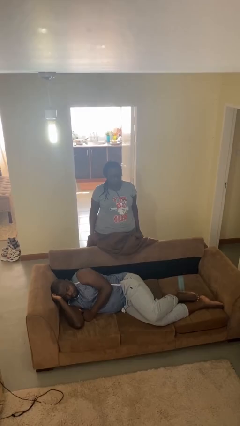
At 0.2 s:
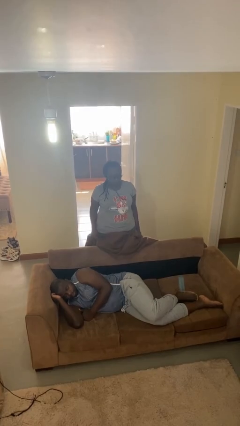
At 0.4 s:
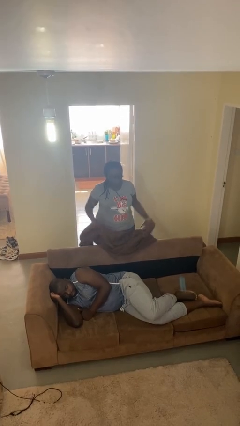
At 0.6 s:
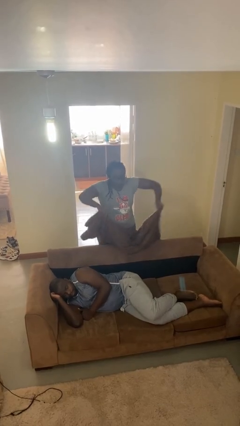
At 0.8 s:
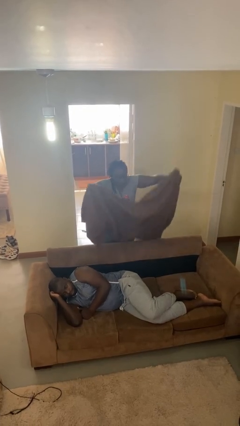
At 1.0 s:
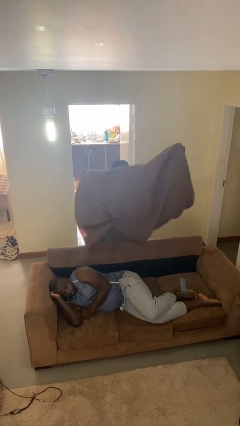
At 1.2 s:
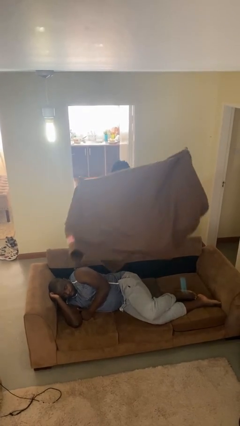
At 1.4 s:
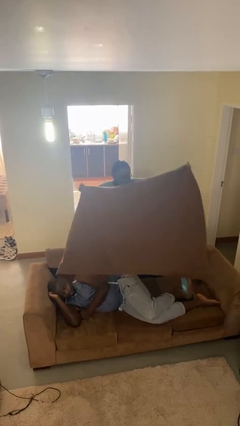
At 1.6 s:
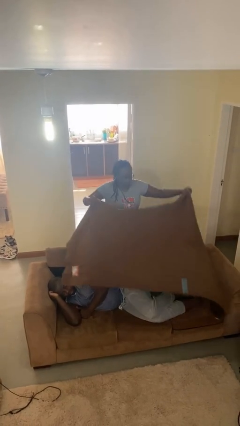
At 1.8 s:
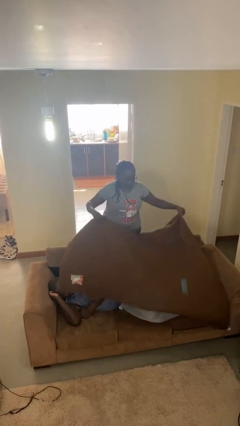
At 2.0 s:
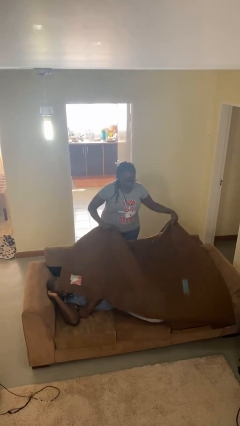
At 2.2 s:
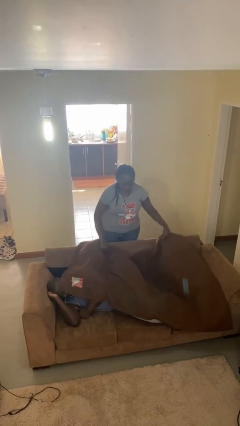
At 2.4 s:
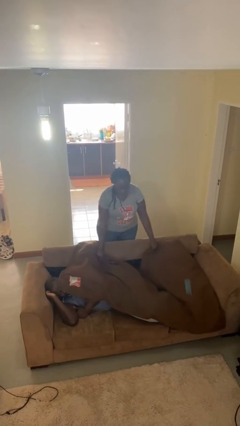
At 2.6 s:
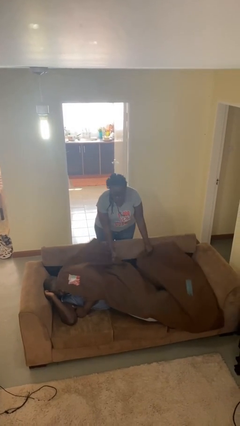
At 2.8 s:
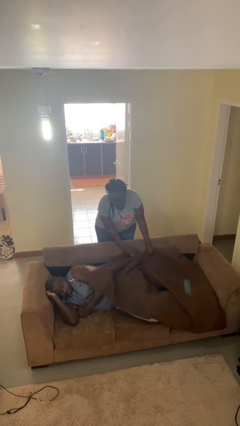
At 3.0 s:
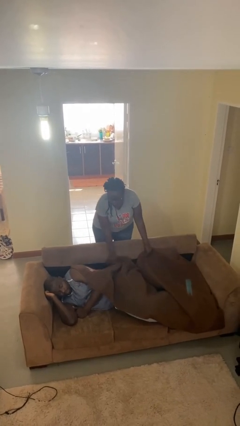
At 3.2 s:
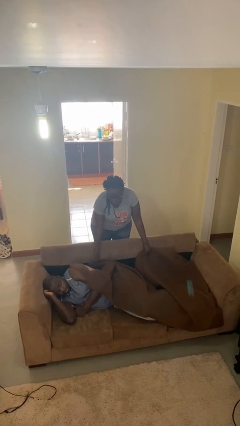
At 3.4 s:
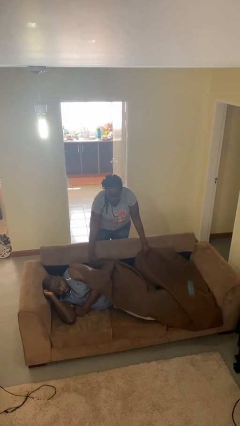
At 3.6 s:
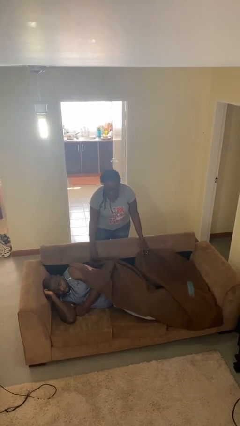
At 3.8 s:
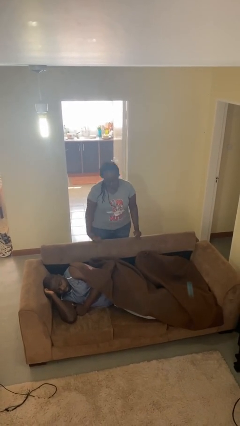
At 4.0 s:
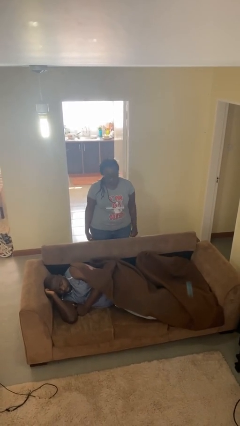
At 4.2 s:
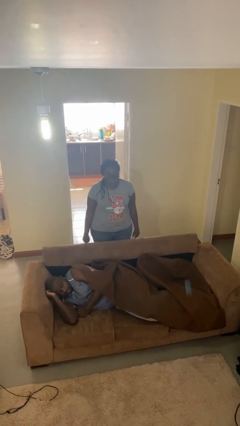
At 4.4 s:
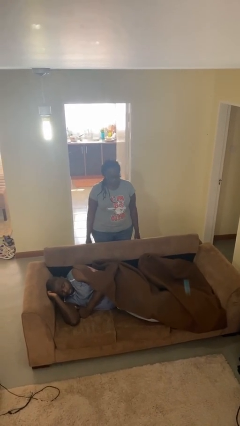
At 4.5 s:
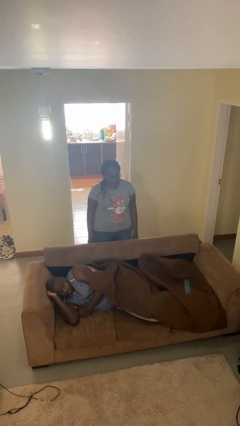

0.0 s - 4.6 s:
person covers friend with blanket

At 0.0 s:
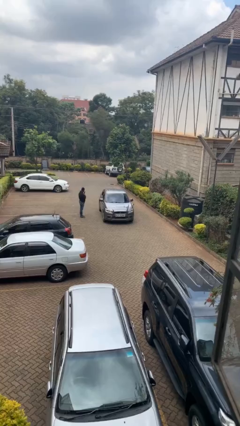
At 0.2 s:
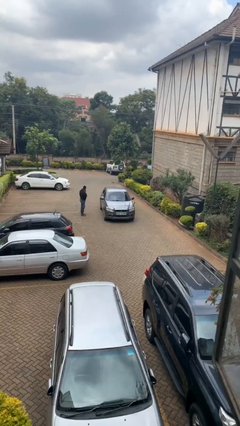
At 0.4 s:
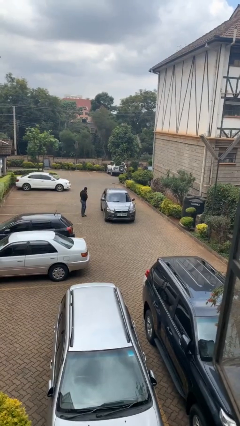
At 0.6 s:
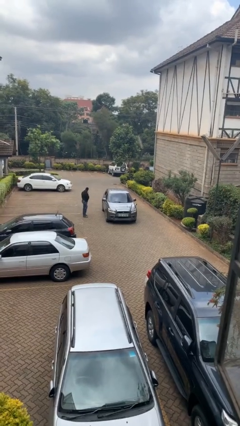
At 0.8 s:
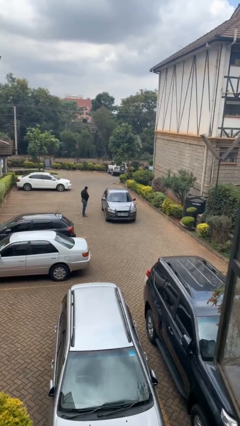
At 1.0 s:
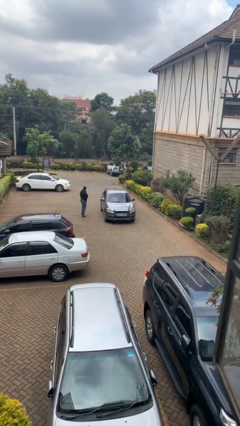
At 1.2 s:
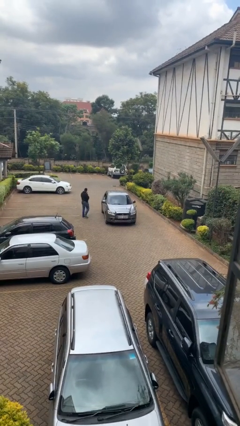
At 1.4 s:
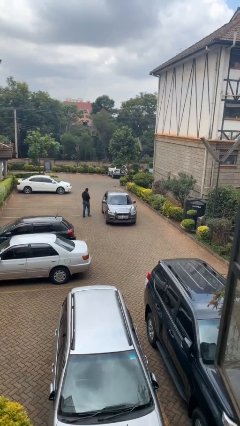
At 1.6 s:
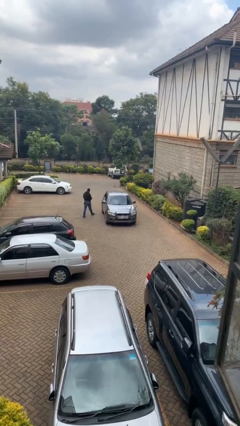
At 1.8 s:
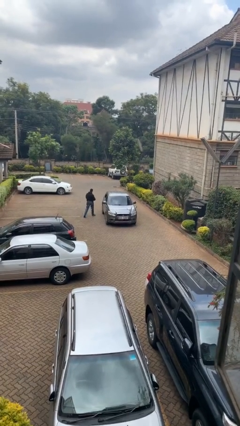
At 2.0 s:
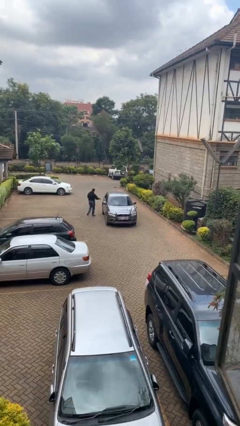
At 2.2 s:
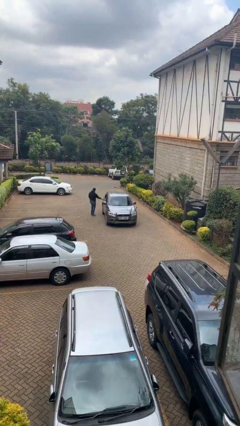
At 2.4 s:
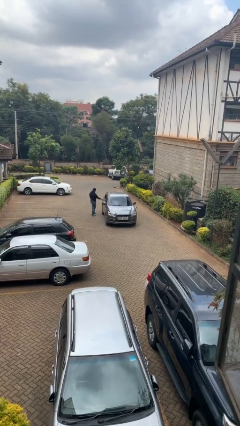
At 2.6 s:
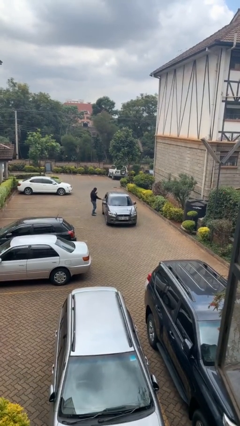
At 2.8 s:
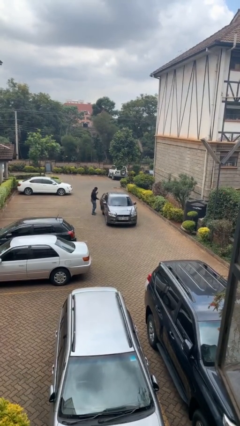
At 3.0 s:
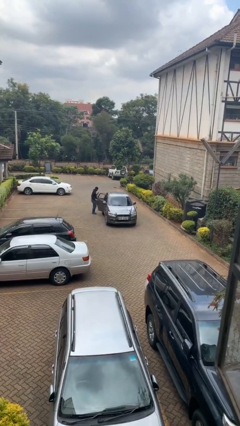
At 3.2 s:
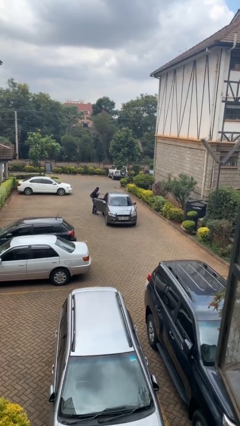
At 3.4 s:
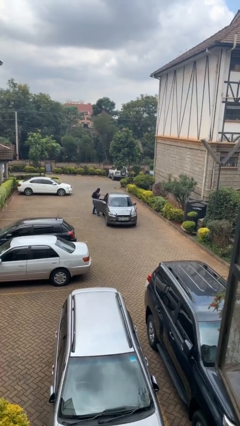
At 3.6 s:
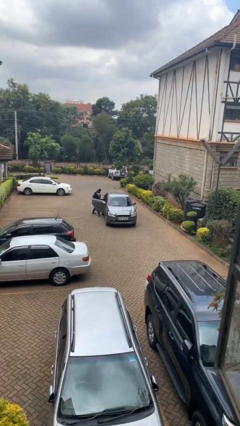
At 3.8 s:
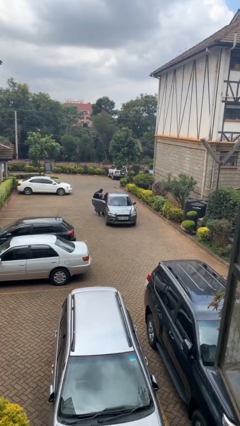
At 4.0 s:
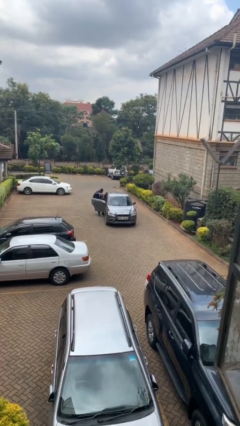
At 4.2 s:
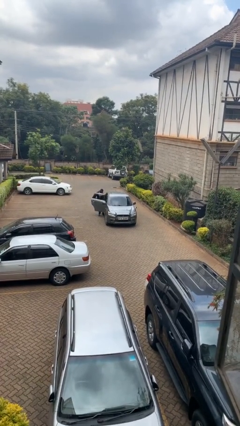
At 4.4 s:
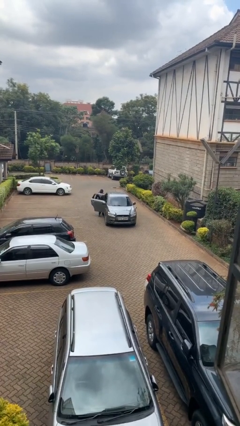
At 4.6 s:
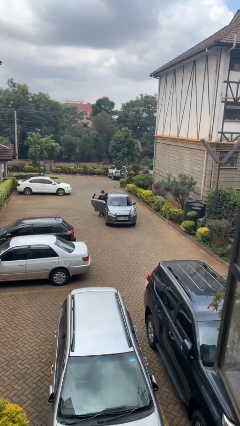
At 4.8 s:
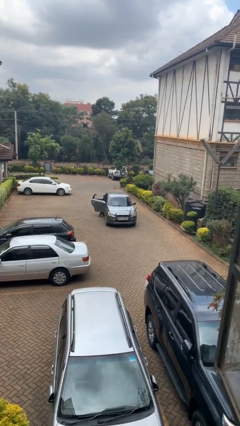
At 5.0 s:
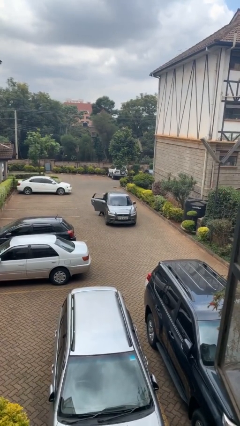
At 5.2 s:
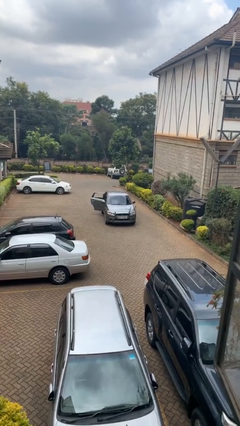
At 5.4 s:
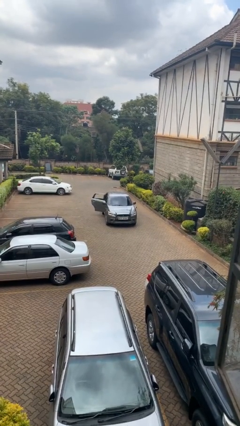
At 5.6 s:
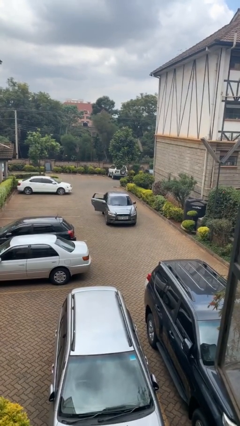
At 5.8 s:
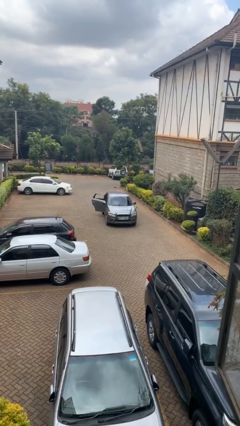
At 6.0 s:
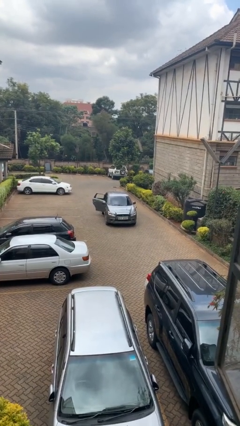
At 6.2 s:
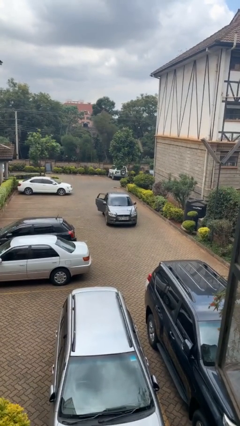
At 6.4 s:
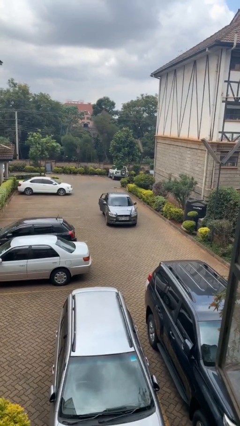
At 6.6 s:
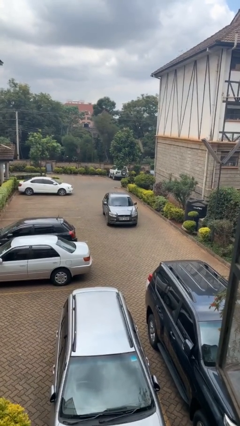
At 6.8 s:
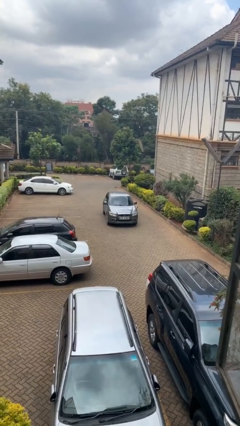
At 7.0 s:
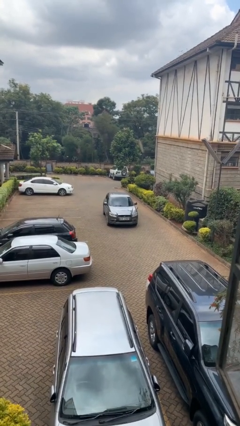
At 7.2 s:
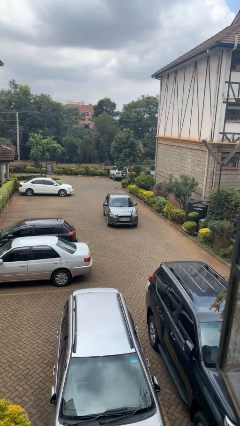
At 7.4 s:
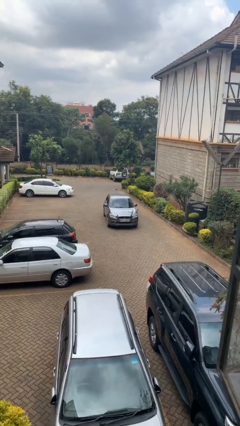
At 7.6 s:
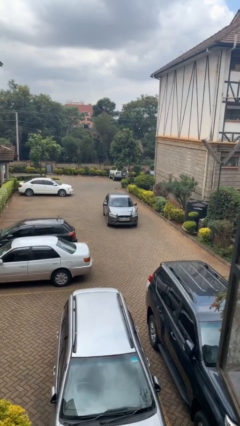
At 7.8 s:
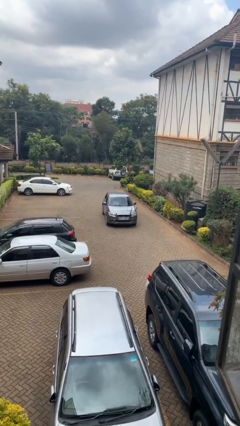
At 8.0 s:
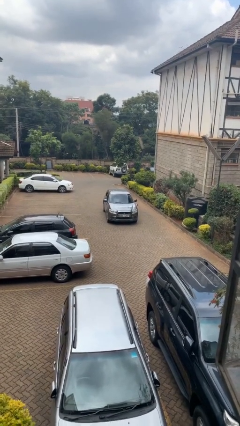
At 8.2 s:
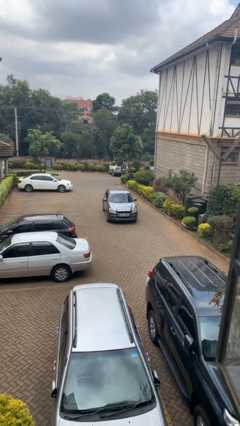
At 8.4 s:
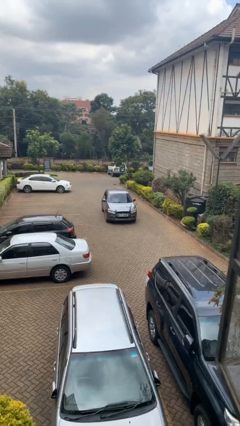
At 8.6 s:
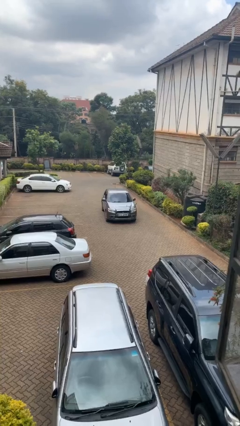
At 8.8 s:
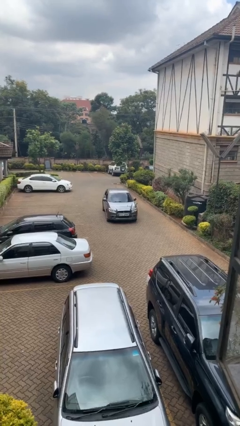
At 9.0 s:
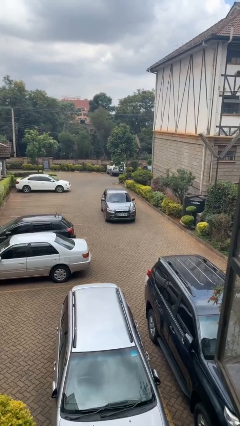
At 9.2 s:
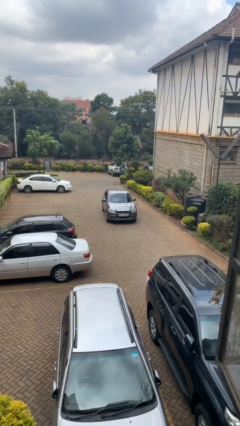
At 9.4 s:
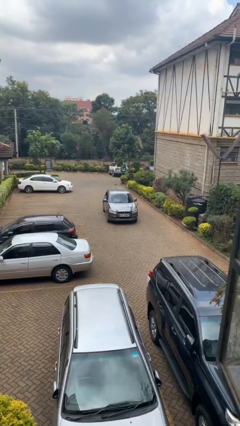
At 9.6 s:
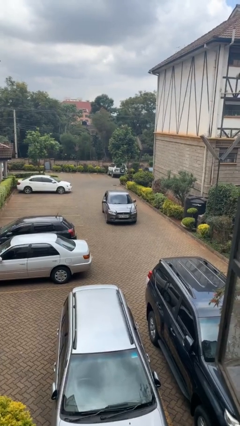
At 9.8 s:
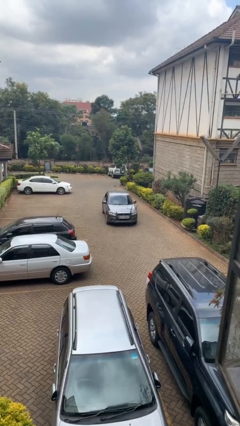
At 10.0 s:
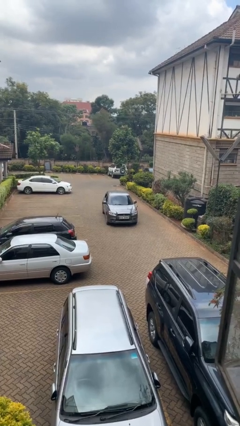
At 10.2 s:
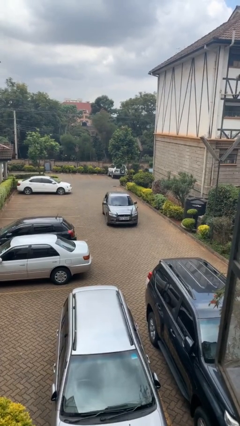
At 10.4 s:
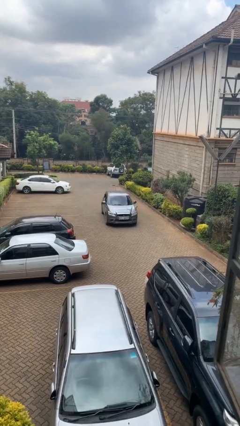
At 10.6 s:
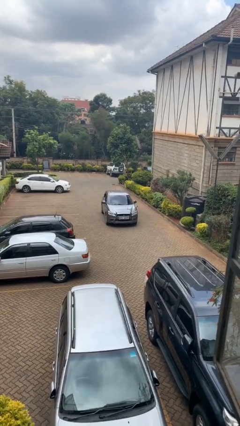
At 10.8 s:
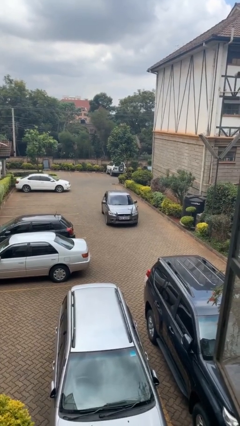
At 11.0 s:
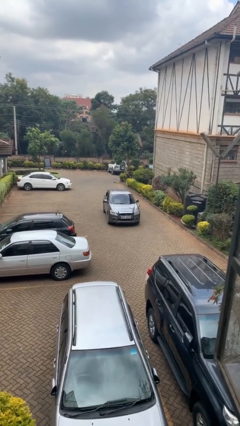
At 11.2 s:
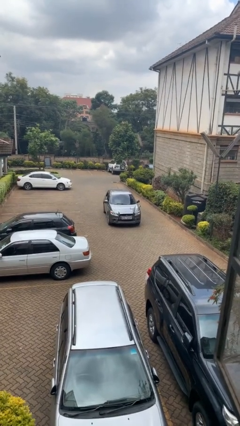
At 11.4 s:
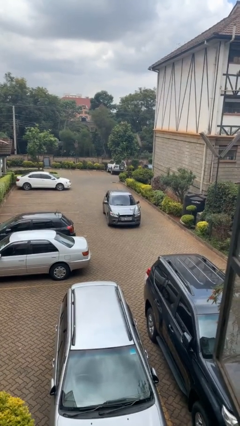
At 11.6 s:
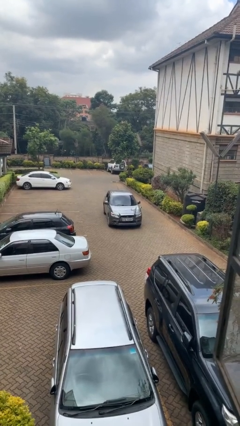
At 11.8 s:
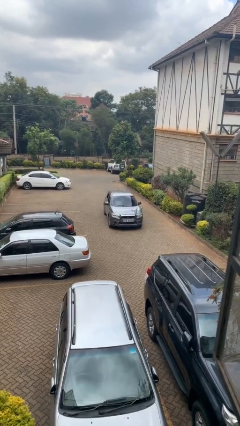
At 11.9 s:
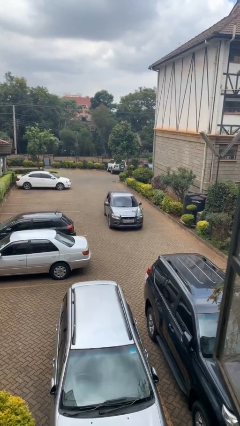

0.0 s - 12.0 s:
car picks up person

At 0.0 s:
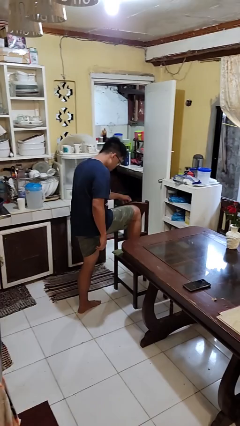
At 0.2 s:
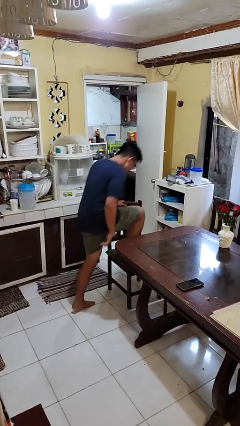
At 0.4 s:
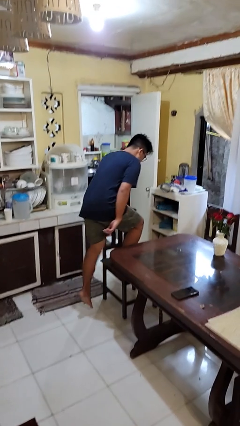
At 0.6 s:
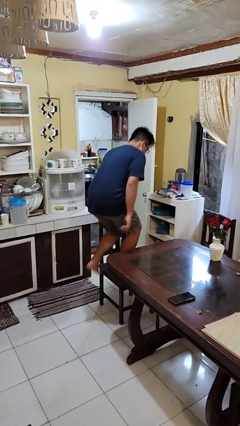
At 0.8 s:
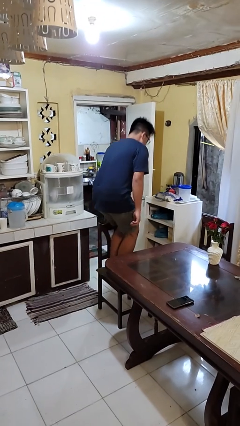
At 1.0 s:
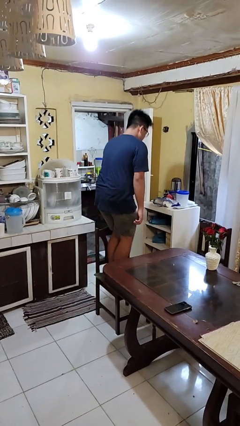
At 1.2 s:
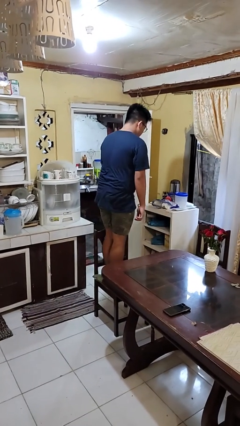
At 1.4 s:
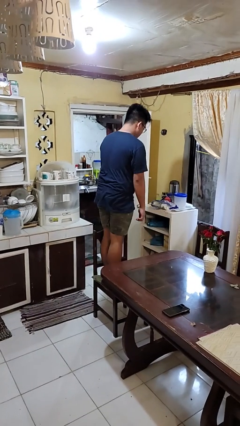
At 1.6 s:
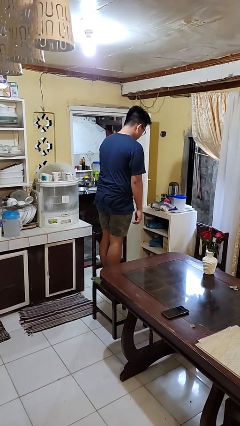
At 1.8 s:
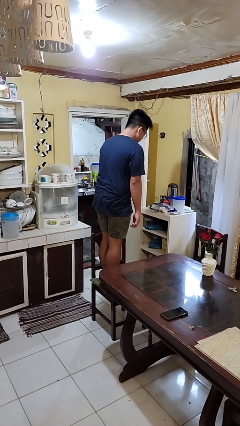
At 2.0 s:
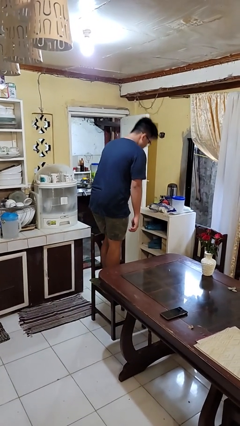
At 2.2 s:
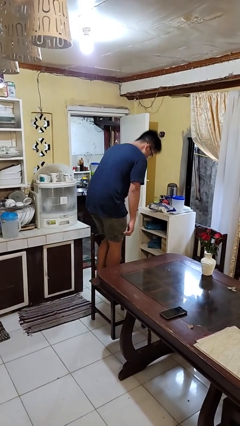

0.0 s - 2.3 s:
person climbs on chair
